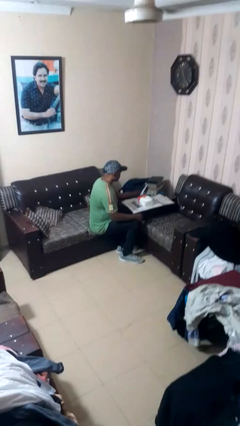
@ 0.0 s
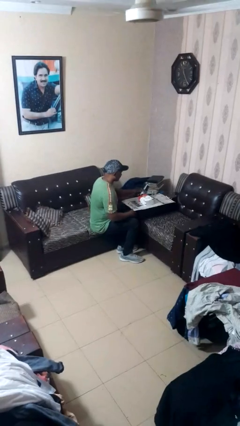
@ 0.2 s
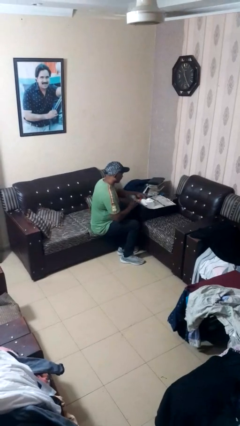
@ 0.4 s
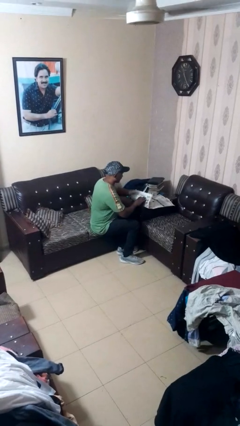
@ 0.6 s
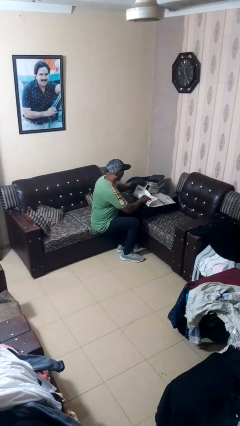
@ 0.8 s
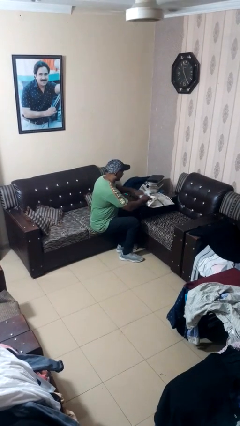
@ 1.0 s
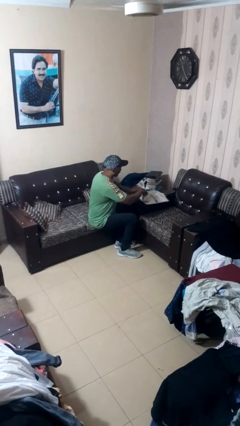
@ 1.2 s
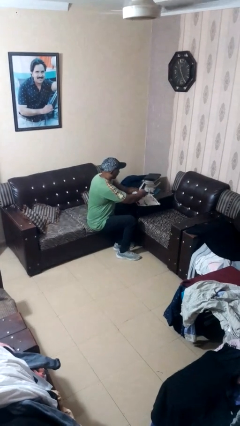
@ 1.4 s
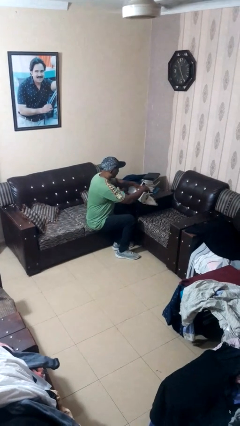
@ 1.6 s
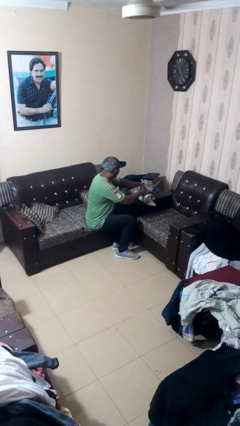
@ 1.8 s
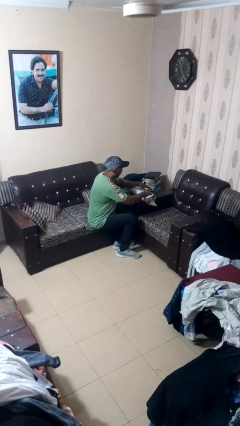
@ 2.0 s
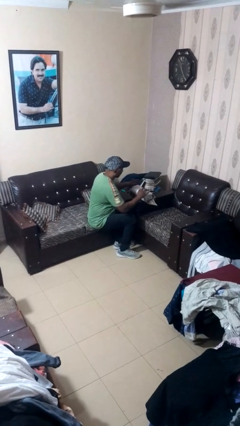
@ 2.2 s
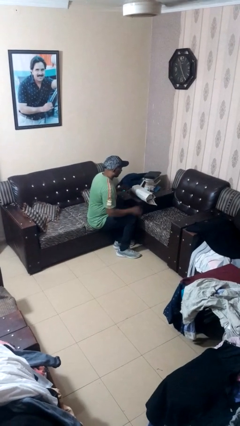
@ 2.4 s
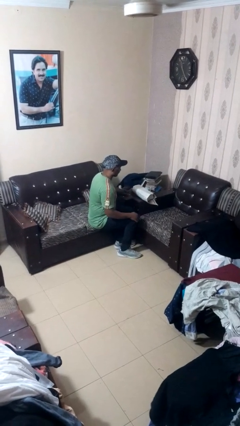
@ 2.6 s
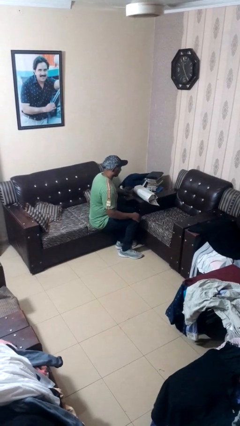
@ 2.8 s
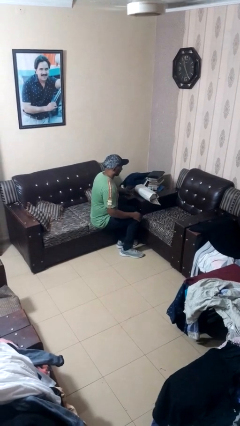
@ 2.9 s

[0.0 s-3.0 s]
person wraps box

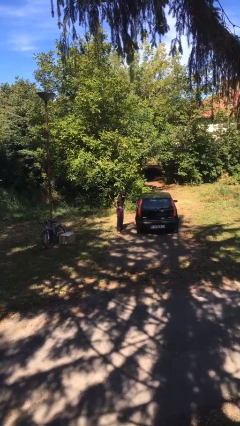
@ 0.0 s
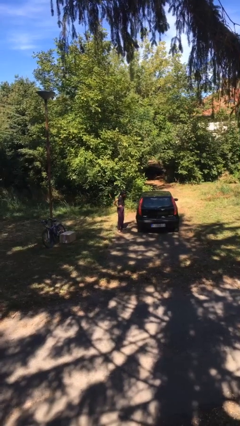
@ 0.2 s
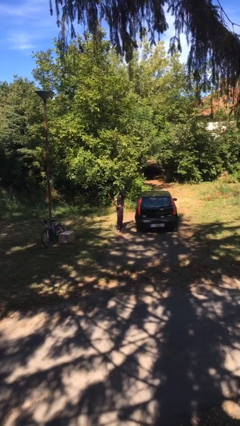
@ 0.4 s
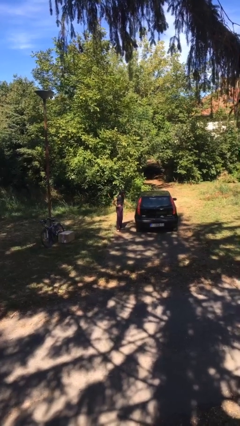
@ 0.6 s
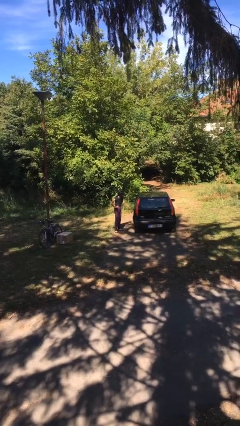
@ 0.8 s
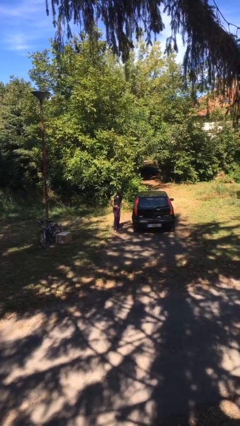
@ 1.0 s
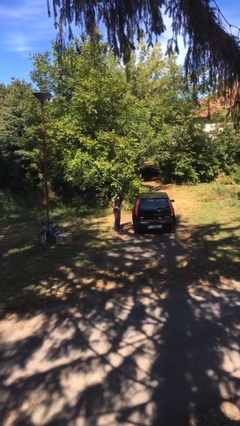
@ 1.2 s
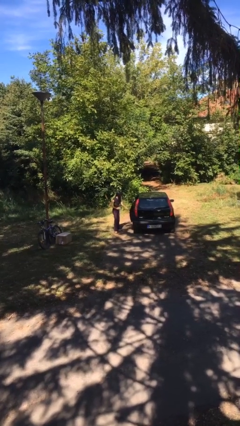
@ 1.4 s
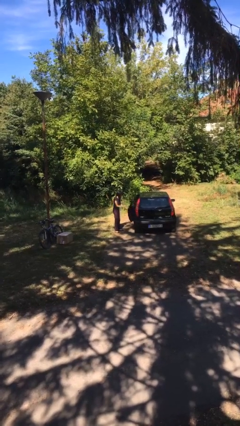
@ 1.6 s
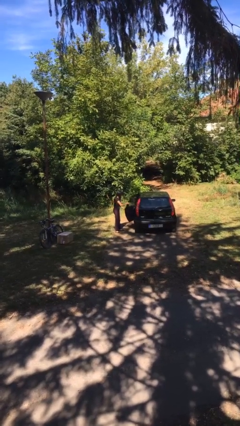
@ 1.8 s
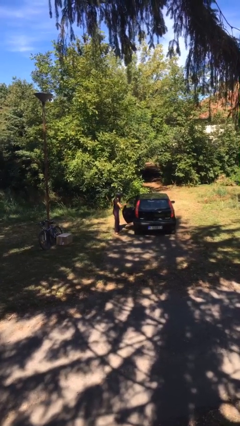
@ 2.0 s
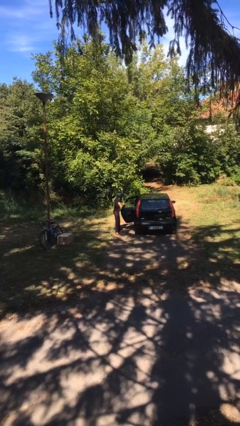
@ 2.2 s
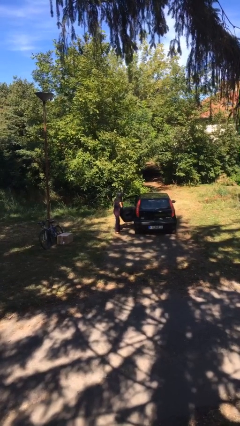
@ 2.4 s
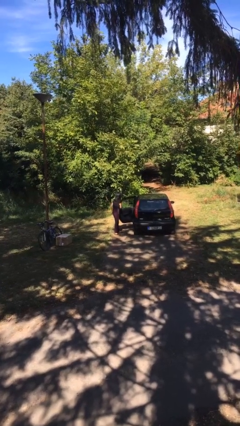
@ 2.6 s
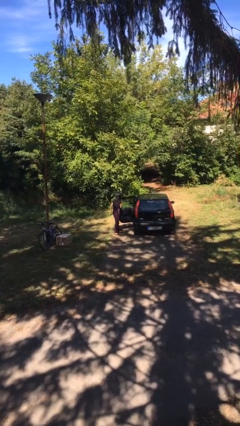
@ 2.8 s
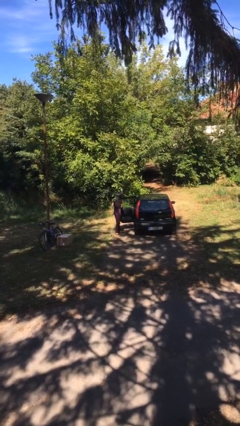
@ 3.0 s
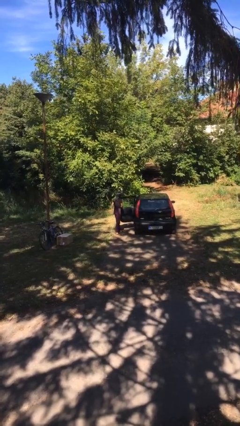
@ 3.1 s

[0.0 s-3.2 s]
person opens car door

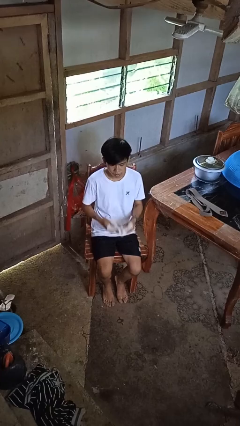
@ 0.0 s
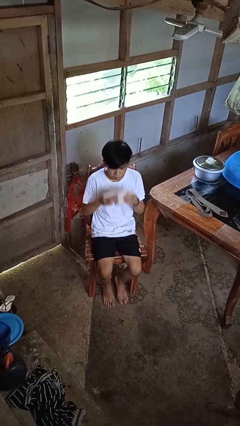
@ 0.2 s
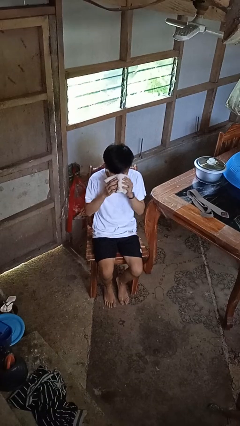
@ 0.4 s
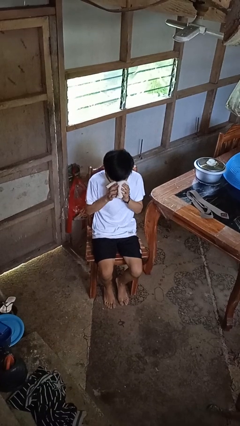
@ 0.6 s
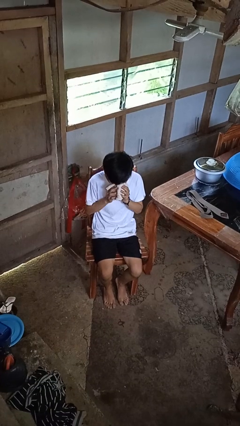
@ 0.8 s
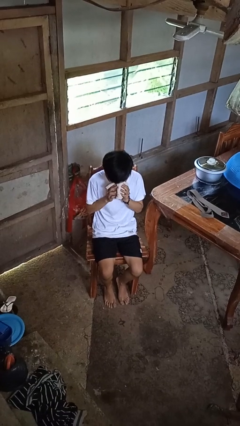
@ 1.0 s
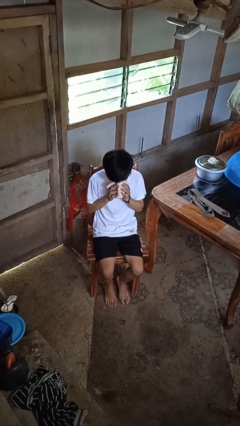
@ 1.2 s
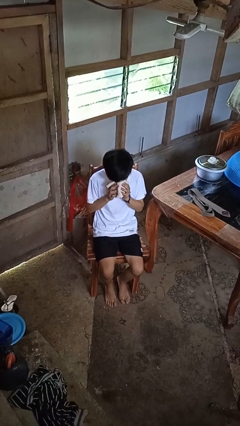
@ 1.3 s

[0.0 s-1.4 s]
person blows nose

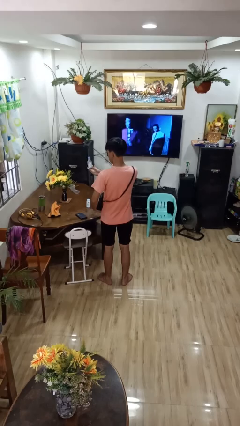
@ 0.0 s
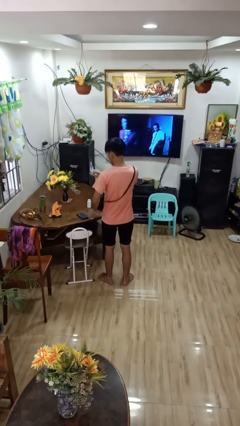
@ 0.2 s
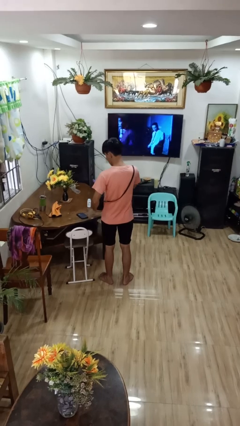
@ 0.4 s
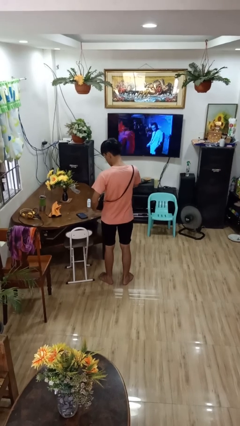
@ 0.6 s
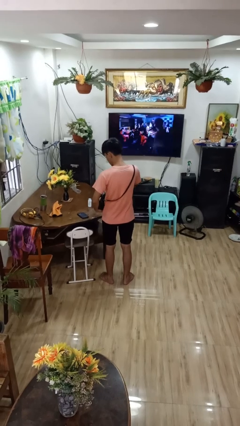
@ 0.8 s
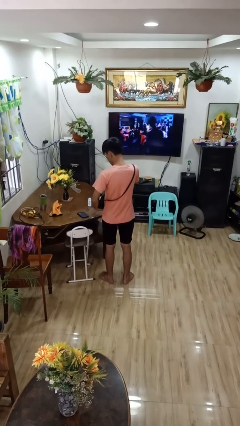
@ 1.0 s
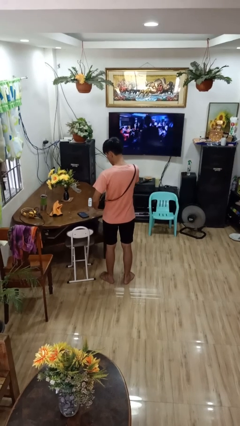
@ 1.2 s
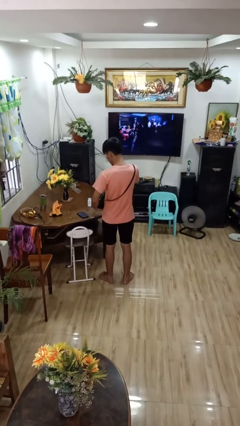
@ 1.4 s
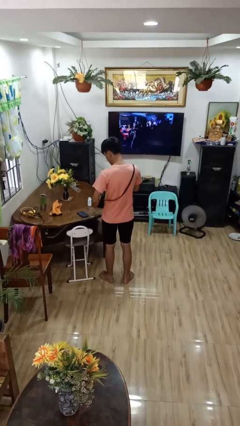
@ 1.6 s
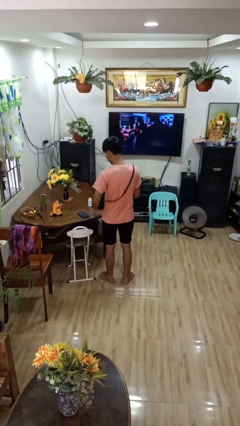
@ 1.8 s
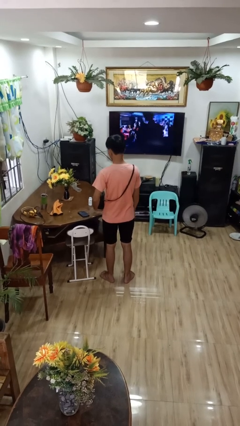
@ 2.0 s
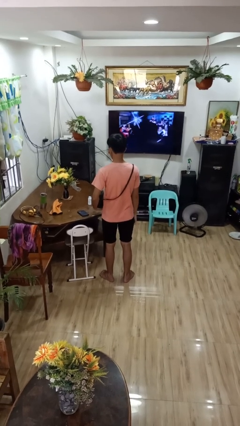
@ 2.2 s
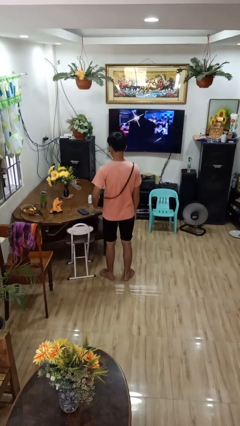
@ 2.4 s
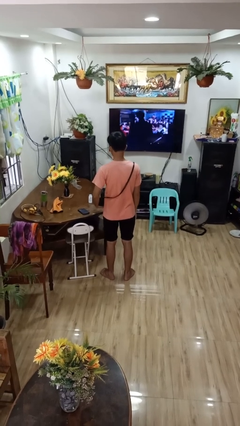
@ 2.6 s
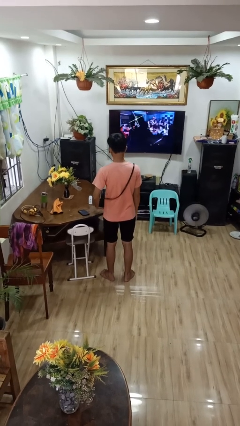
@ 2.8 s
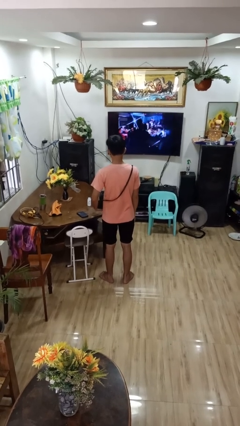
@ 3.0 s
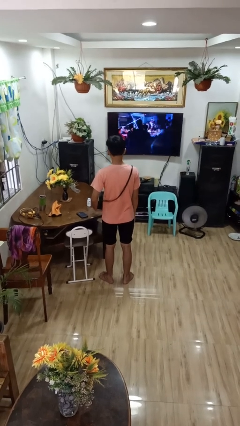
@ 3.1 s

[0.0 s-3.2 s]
person puts object into purse

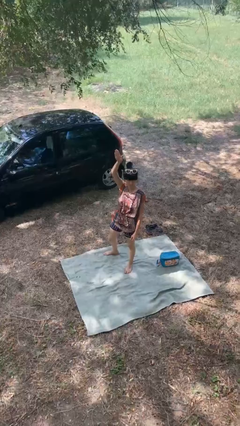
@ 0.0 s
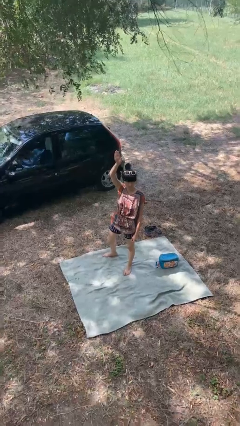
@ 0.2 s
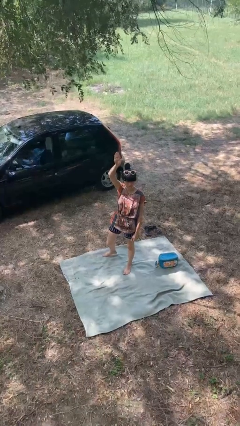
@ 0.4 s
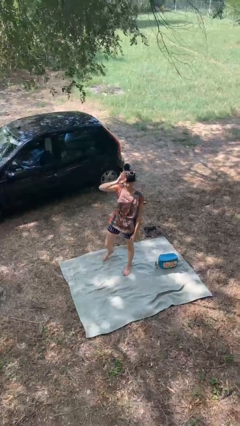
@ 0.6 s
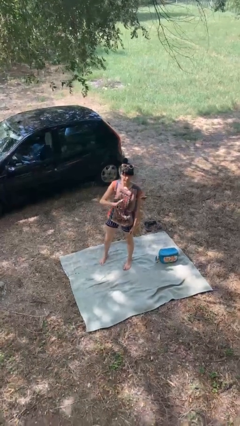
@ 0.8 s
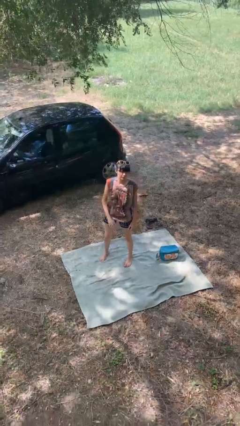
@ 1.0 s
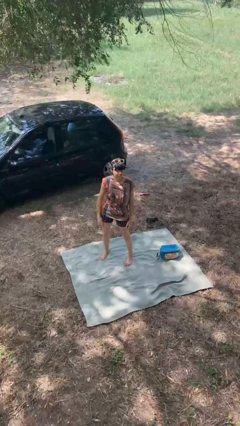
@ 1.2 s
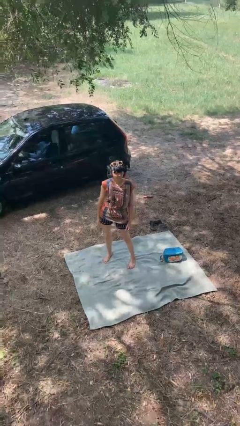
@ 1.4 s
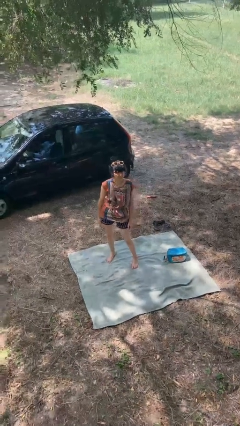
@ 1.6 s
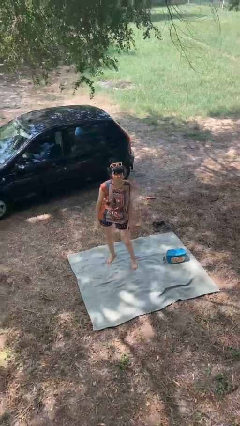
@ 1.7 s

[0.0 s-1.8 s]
person gestures lower hand

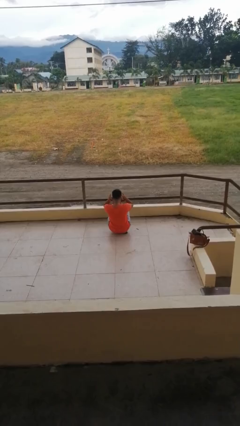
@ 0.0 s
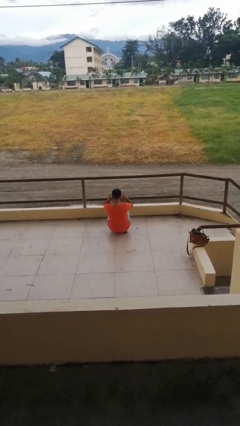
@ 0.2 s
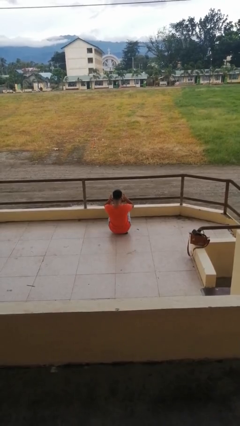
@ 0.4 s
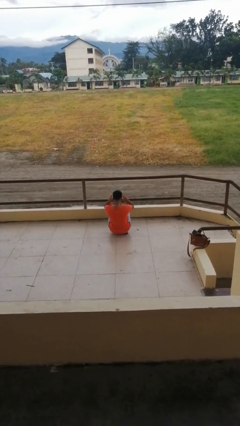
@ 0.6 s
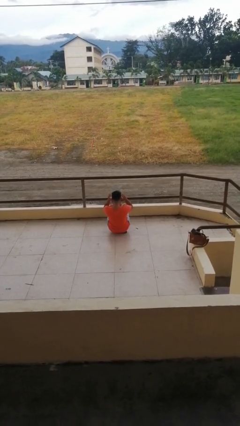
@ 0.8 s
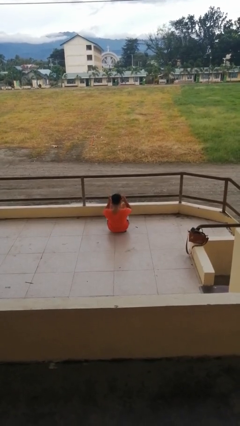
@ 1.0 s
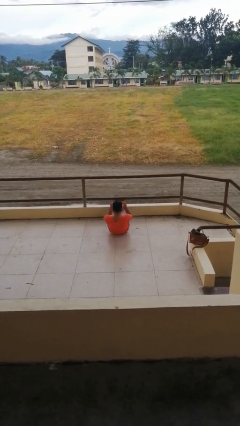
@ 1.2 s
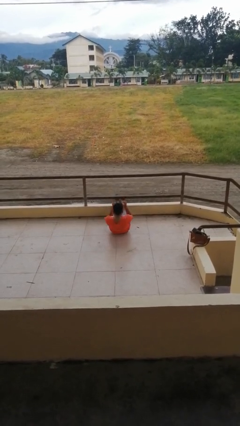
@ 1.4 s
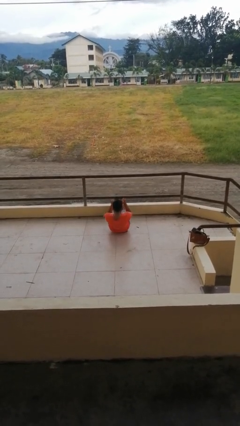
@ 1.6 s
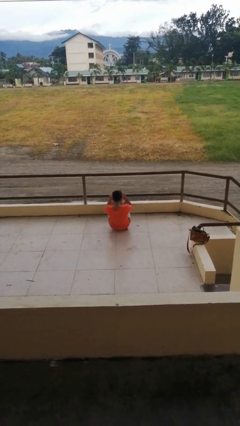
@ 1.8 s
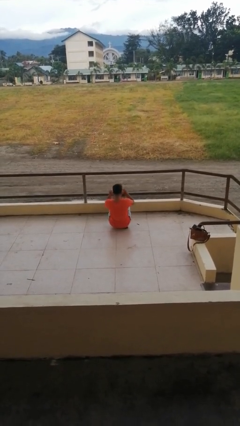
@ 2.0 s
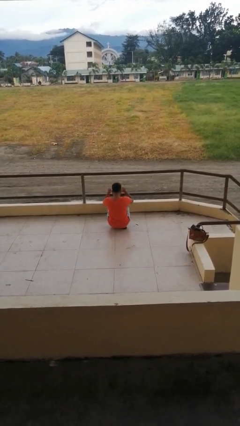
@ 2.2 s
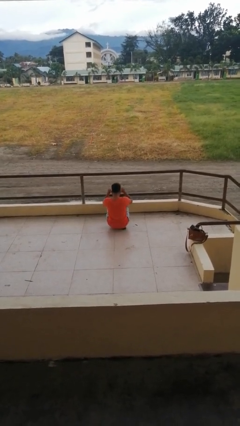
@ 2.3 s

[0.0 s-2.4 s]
person exercises with situp

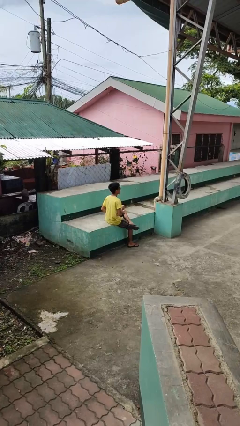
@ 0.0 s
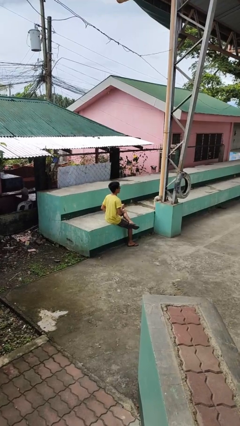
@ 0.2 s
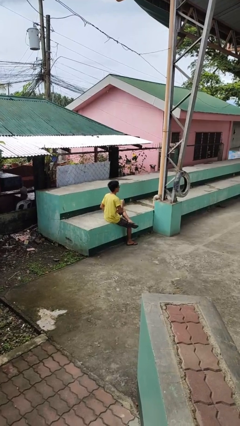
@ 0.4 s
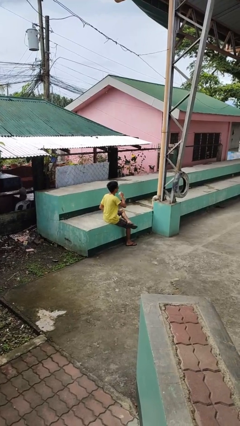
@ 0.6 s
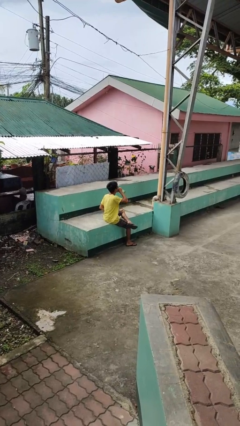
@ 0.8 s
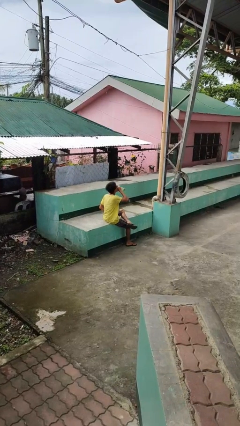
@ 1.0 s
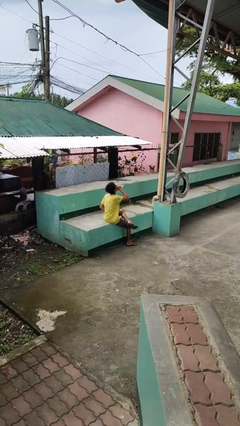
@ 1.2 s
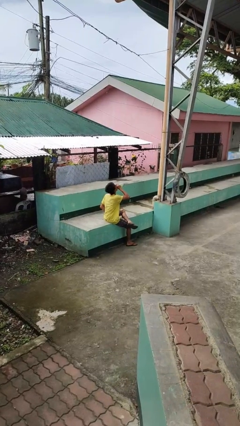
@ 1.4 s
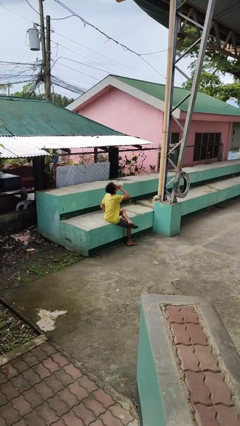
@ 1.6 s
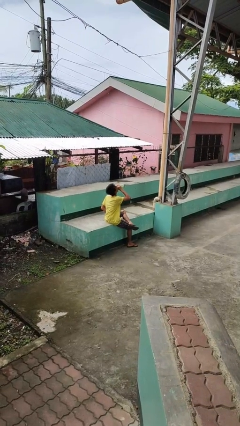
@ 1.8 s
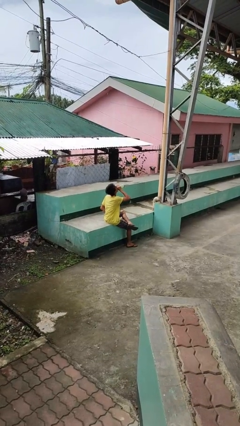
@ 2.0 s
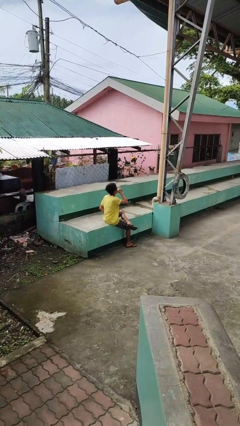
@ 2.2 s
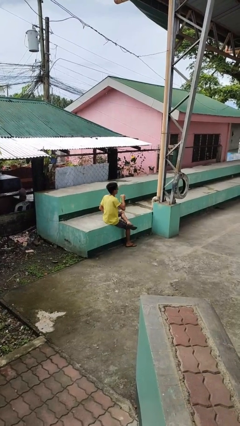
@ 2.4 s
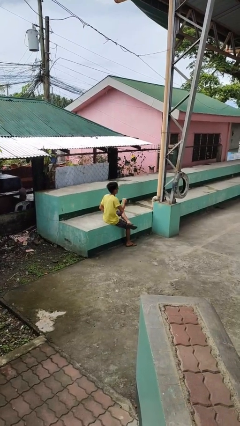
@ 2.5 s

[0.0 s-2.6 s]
person drinks from bottle
